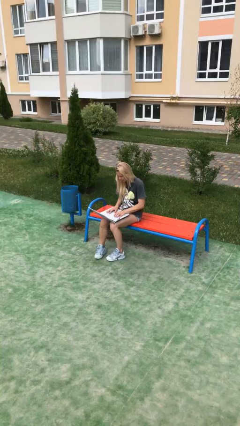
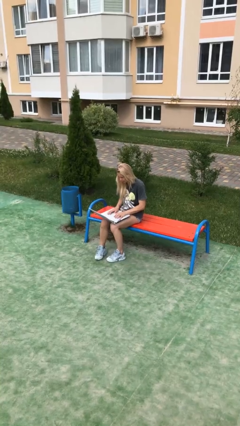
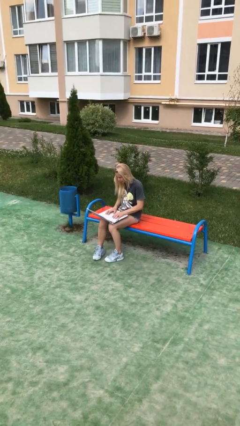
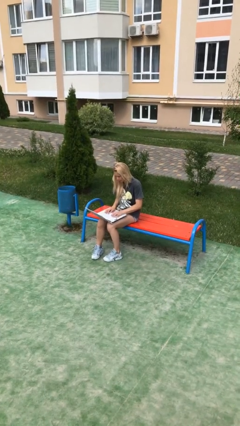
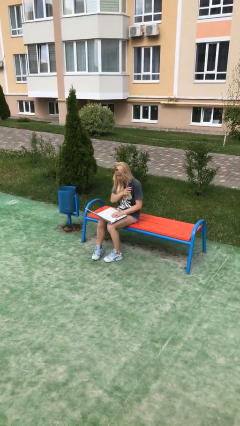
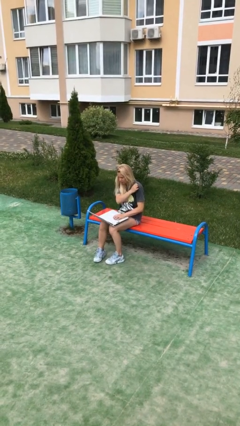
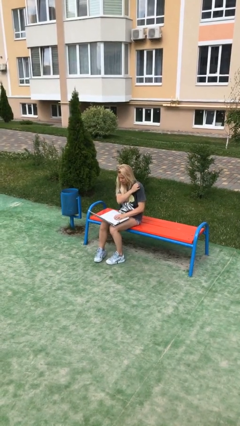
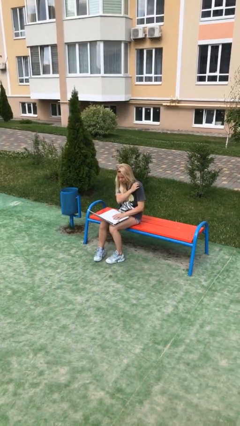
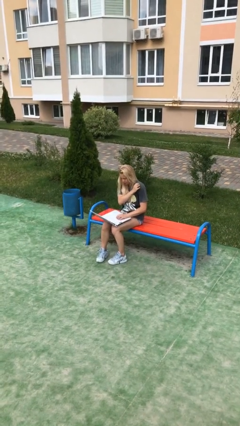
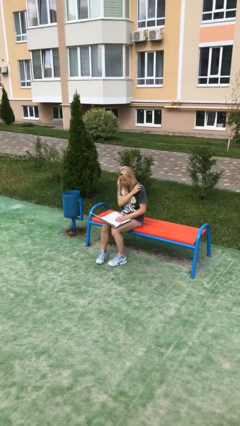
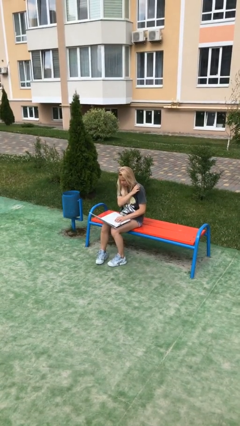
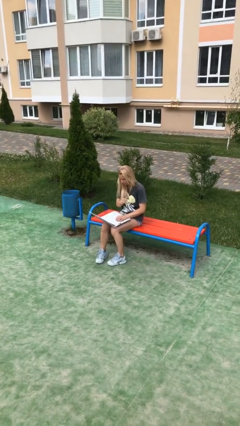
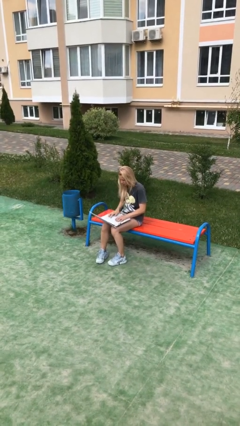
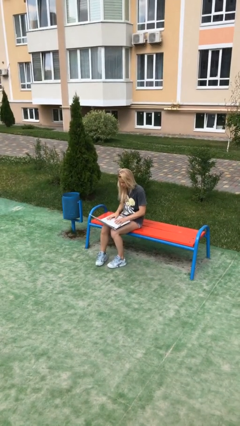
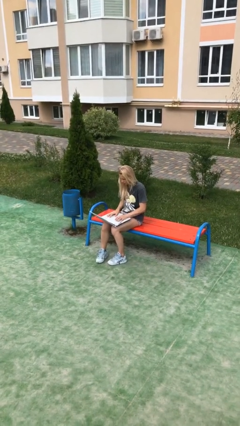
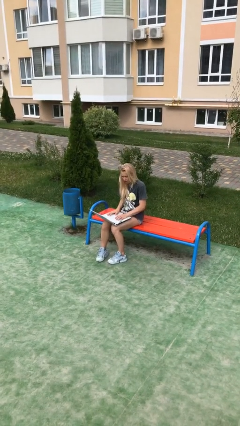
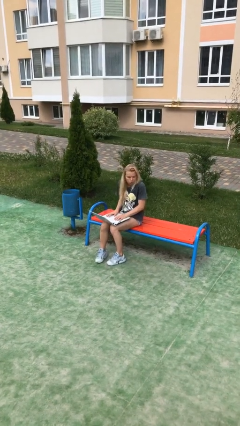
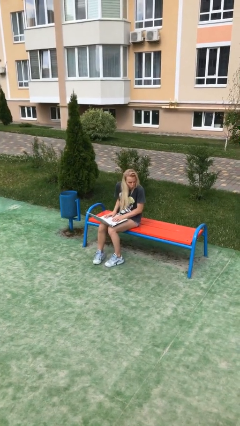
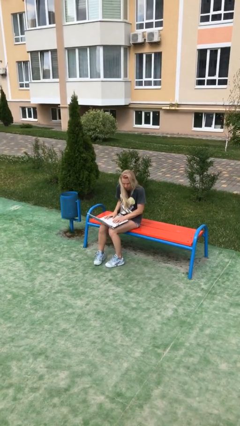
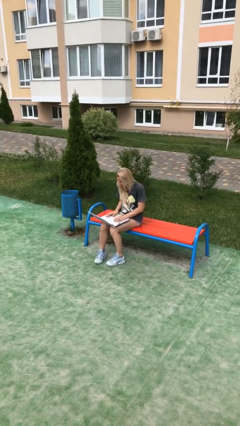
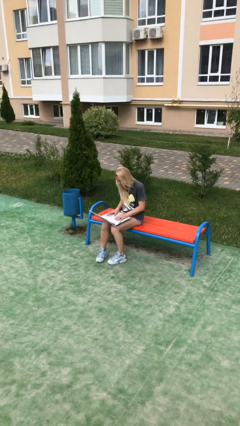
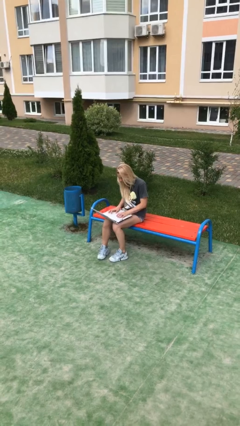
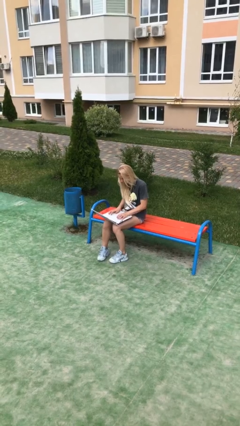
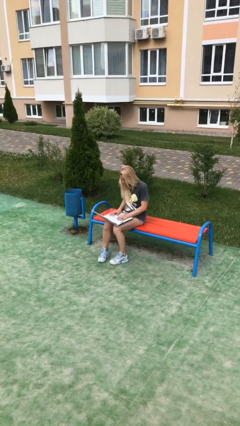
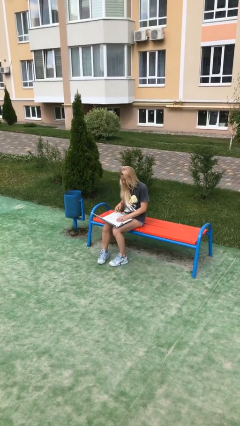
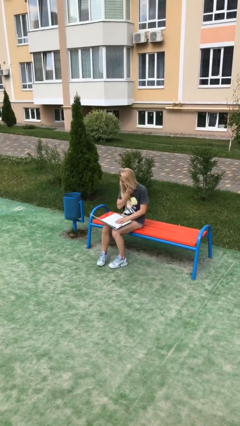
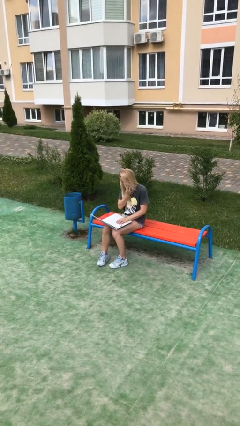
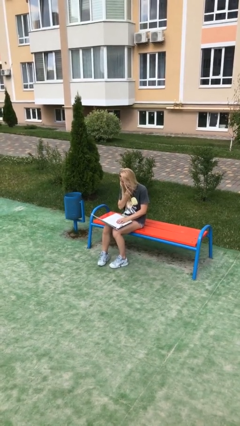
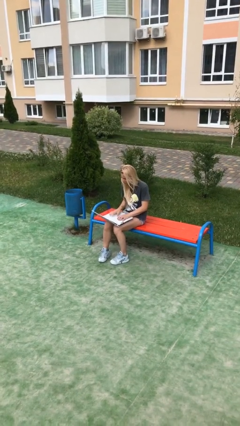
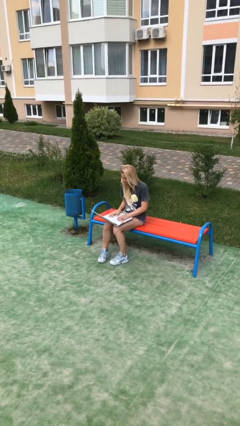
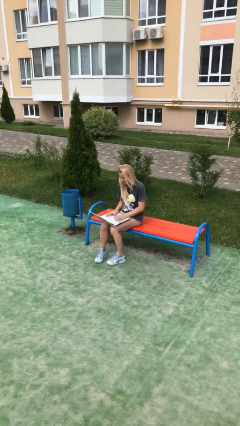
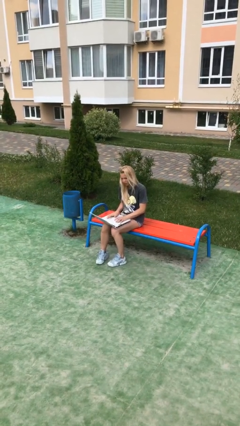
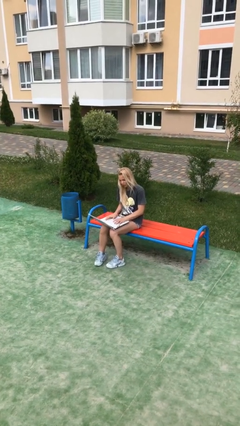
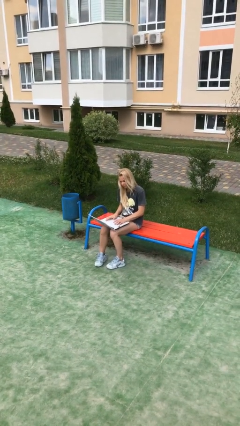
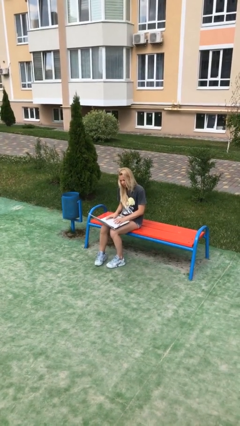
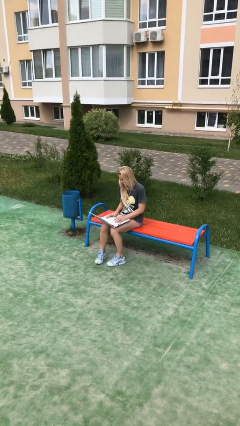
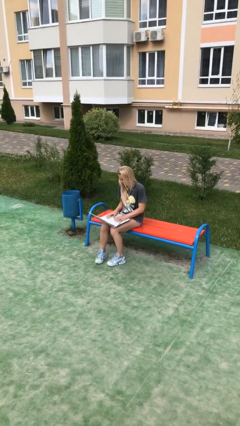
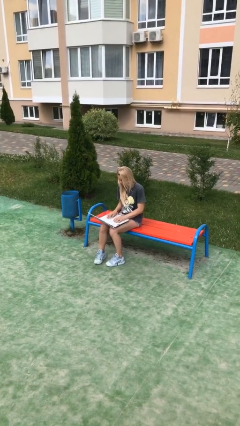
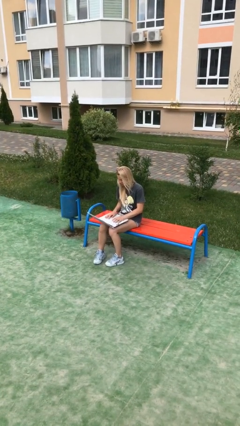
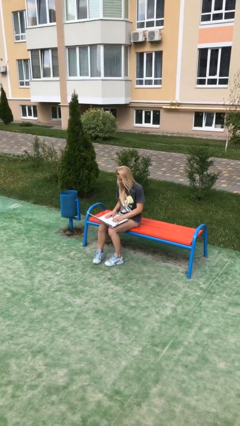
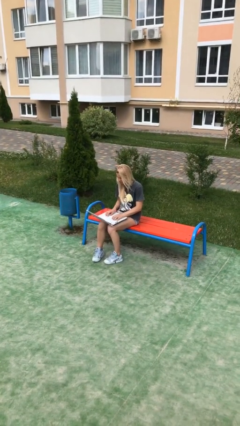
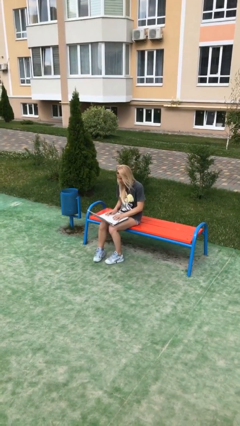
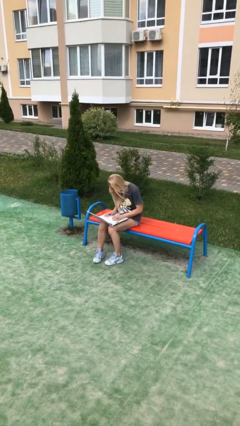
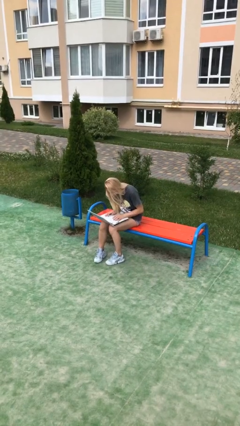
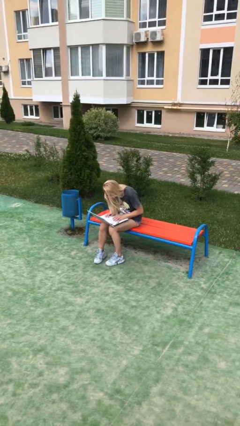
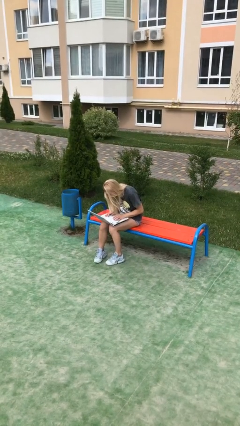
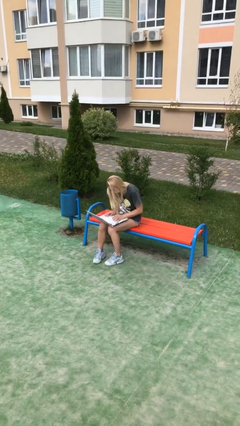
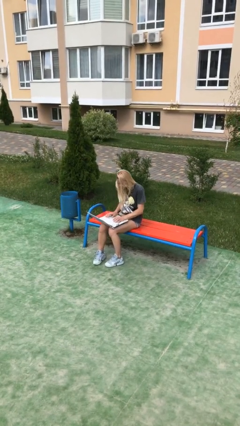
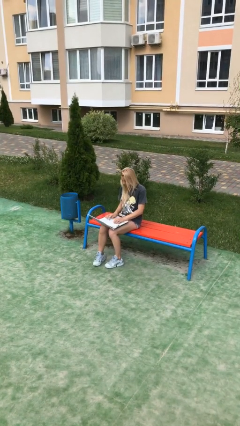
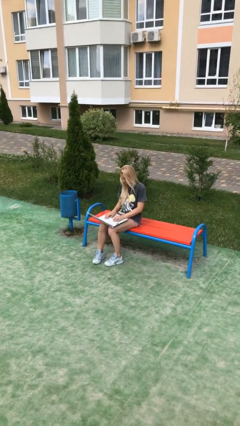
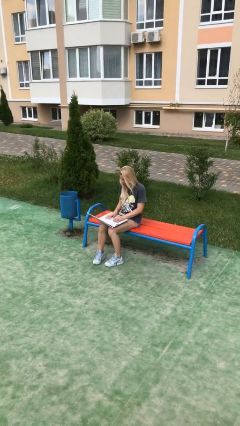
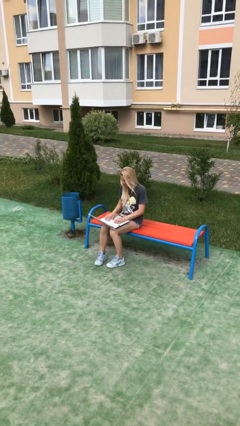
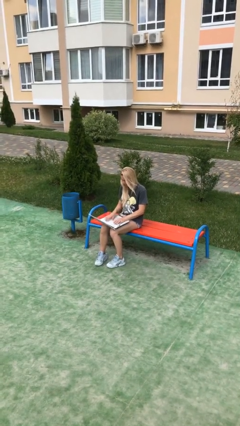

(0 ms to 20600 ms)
person interacts with laptop

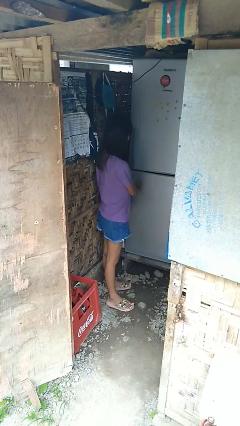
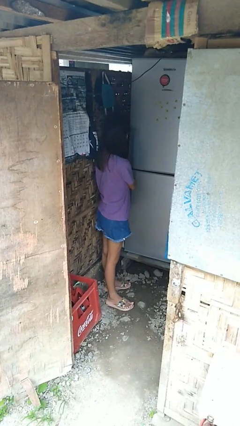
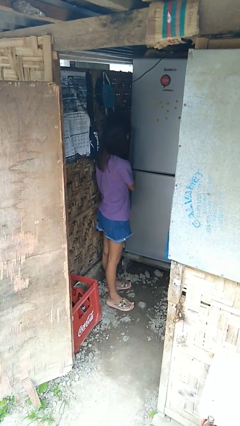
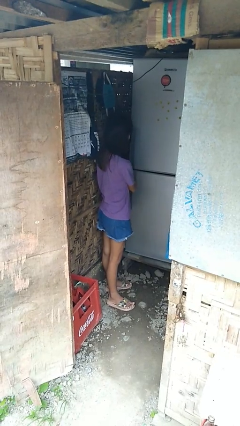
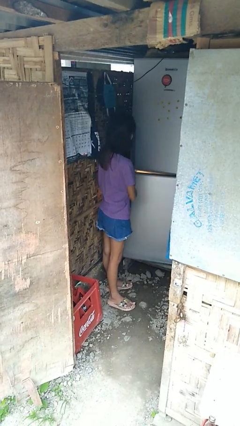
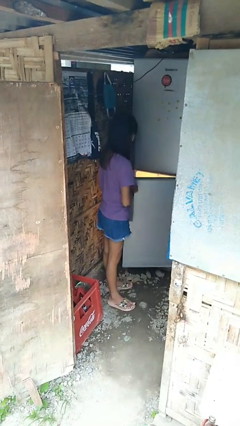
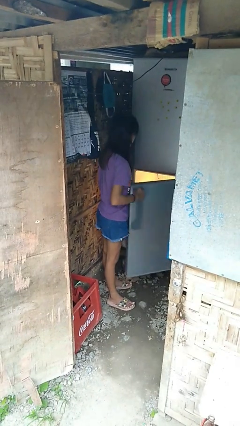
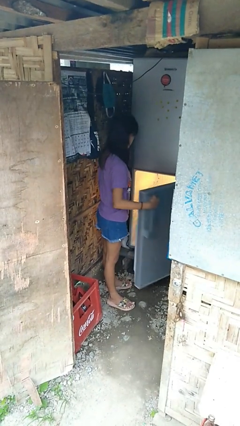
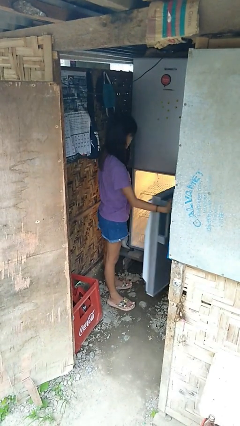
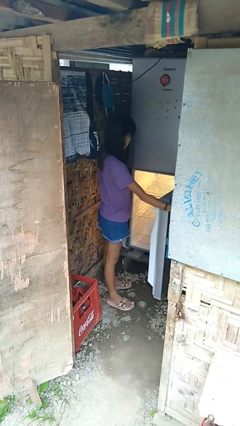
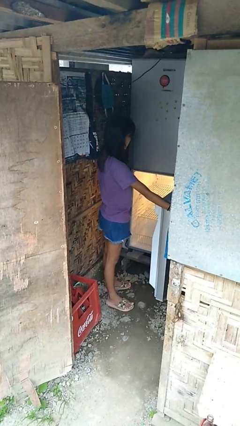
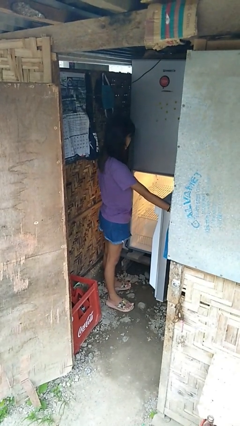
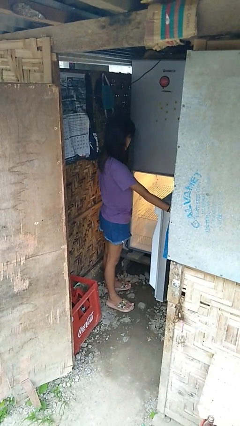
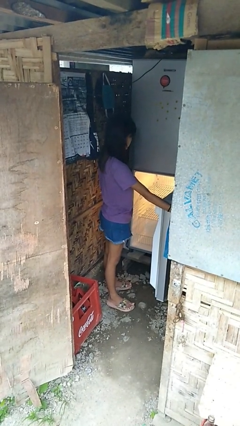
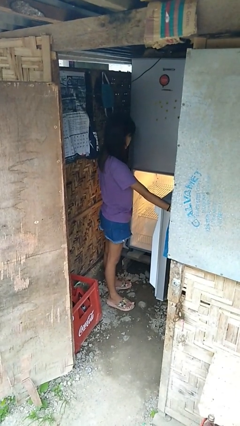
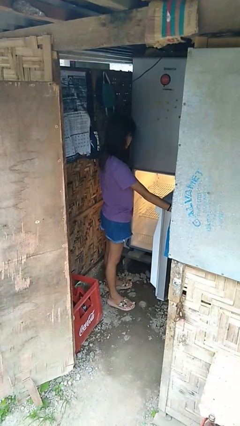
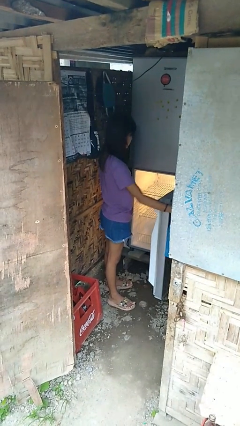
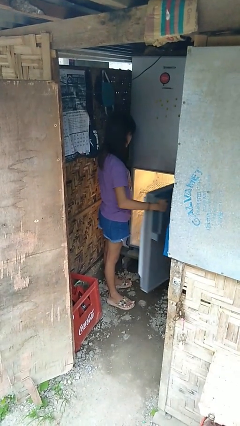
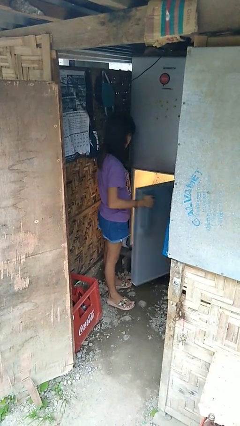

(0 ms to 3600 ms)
person opens refrigerator

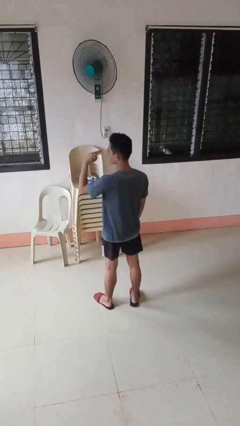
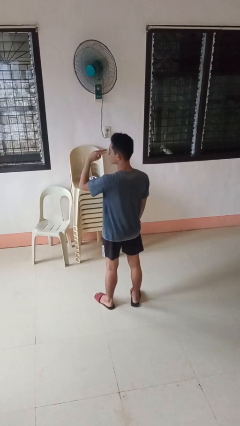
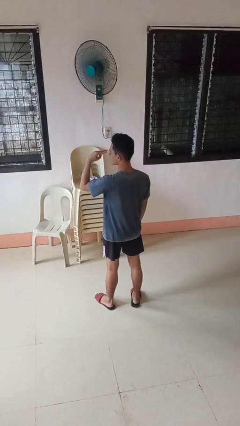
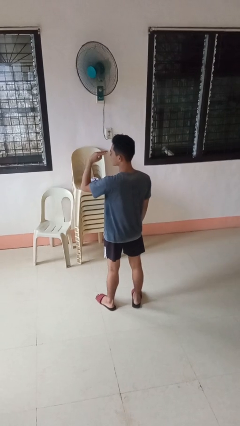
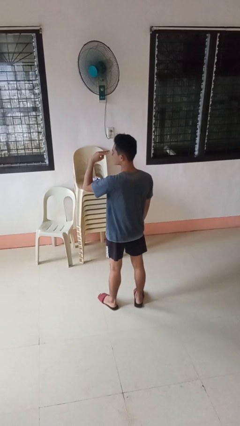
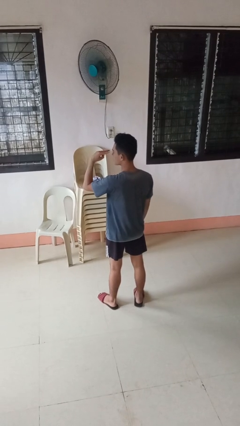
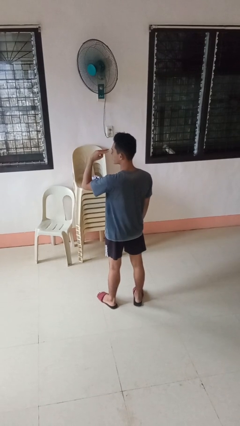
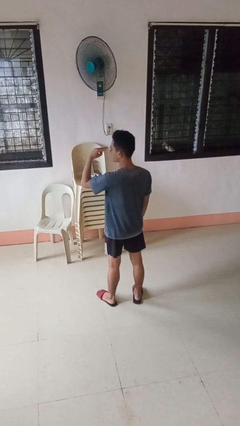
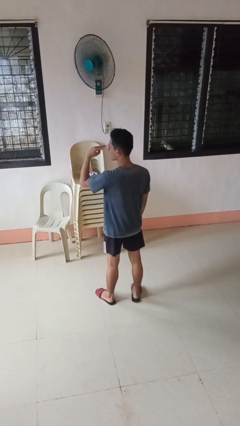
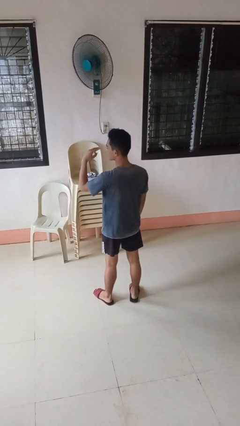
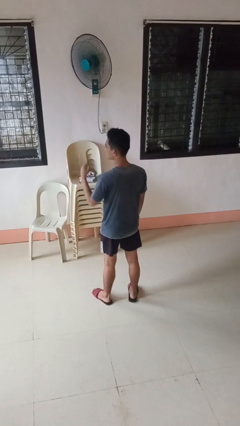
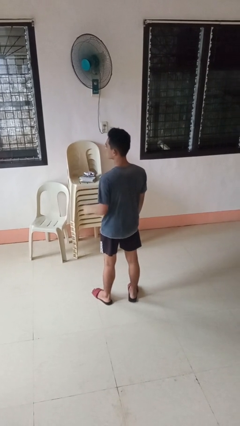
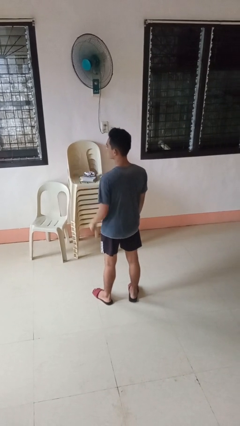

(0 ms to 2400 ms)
person gestures watch closely

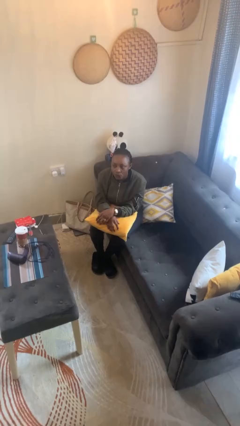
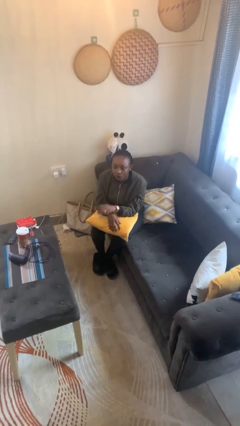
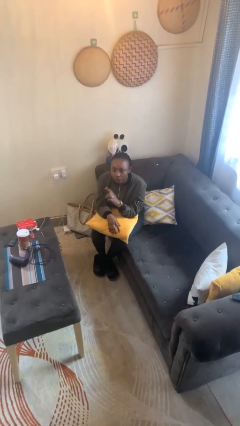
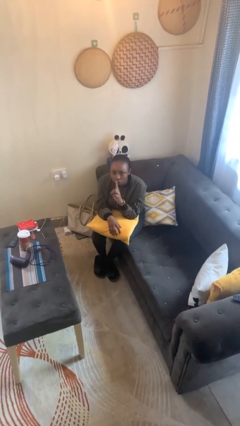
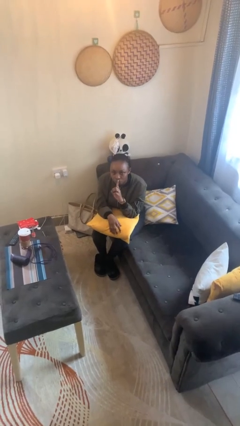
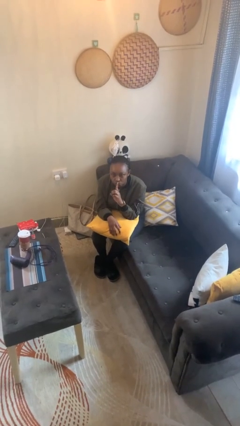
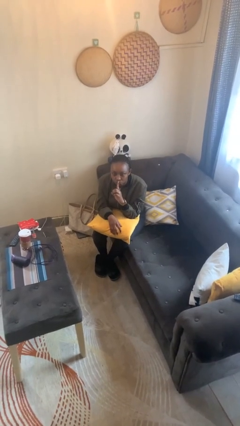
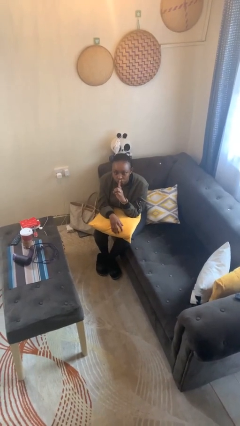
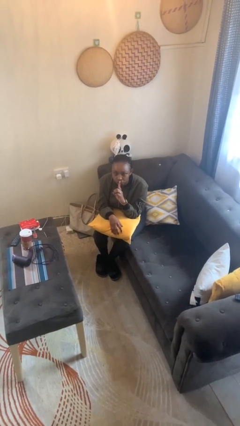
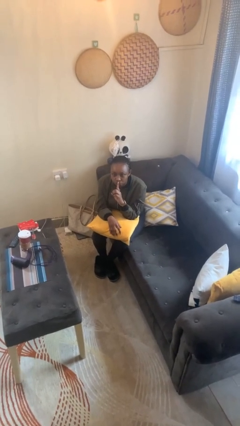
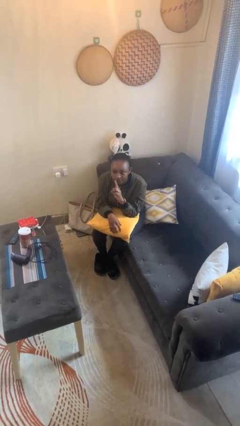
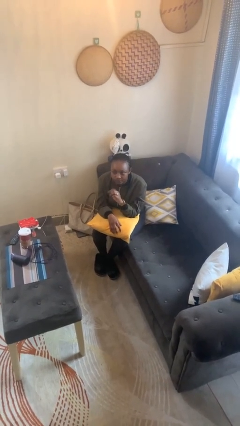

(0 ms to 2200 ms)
person gestures be quiet
